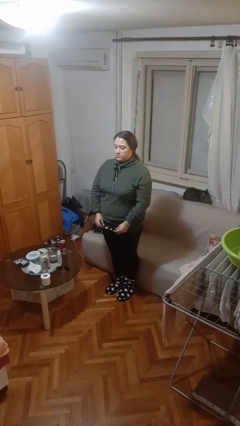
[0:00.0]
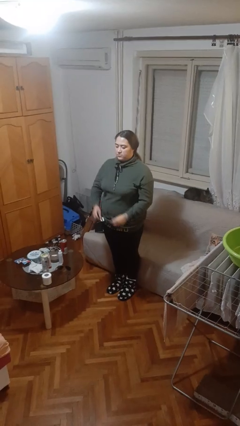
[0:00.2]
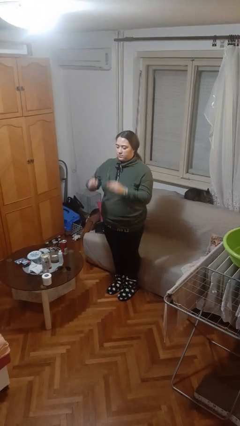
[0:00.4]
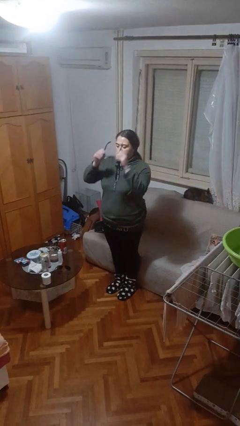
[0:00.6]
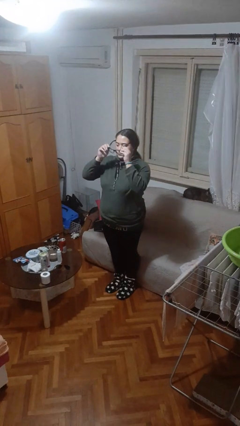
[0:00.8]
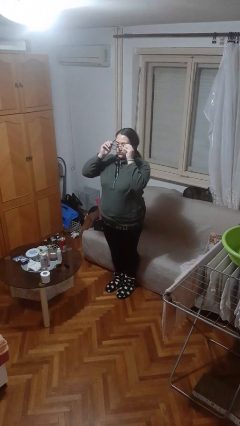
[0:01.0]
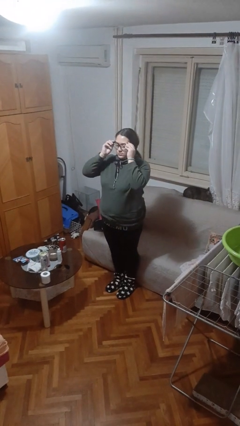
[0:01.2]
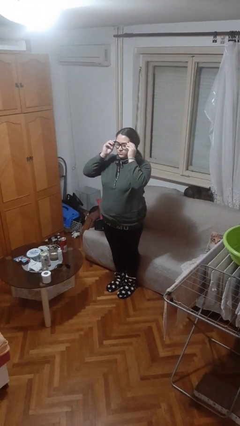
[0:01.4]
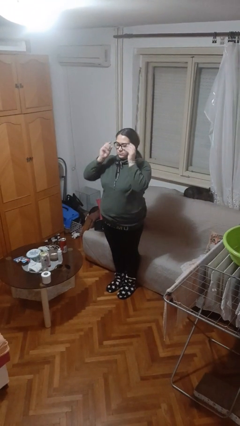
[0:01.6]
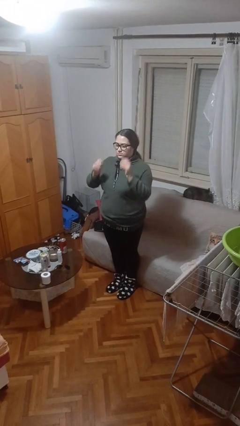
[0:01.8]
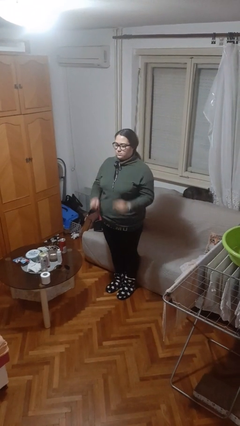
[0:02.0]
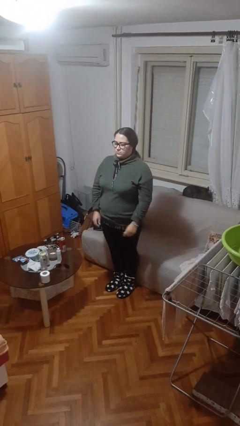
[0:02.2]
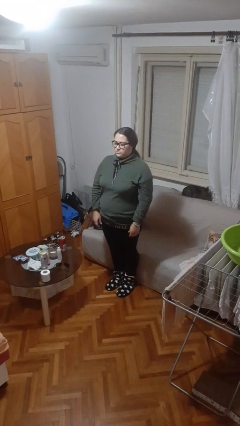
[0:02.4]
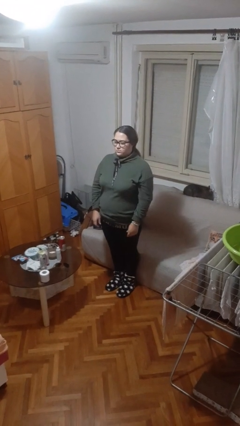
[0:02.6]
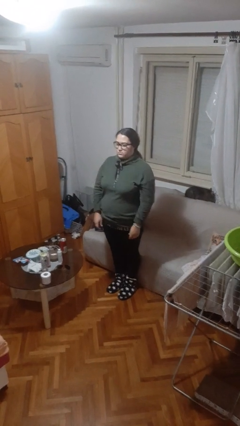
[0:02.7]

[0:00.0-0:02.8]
person puts on glasses

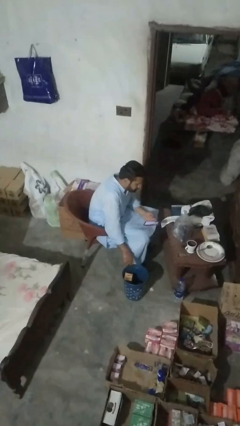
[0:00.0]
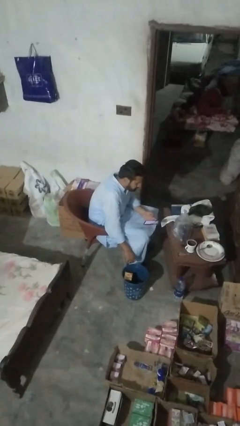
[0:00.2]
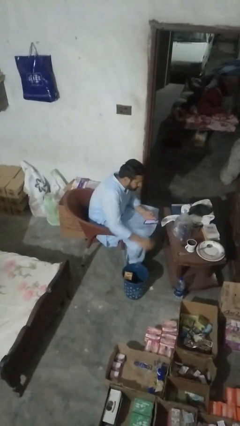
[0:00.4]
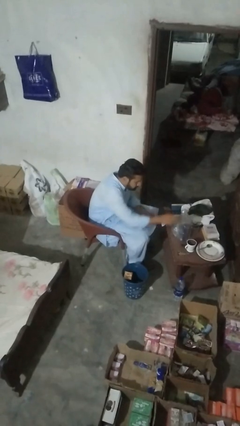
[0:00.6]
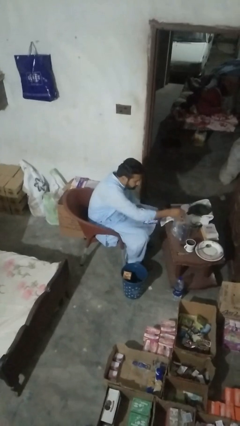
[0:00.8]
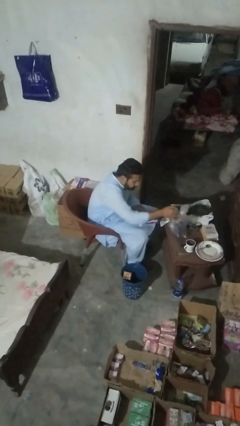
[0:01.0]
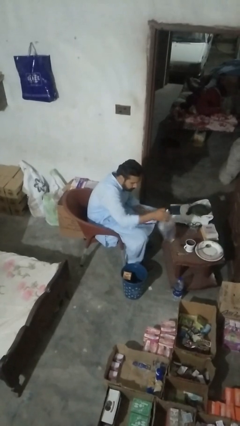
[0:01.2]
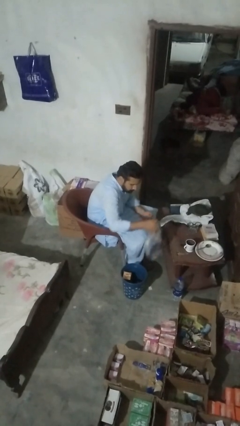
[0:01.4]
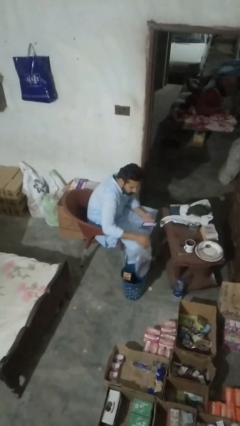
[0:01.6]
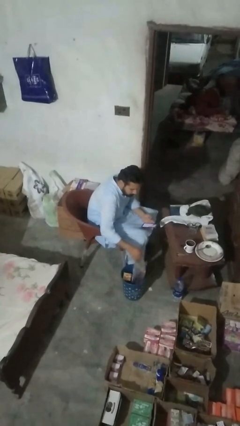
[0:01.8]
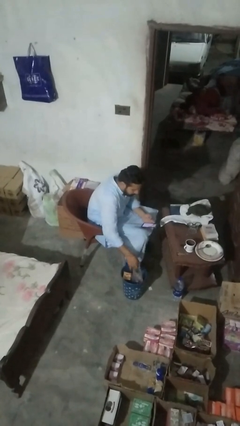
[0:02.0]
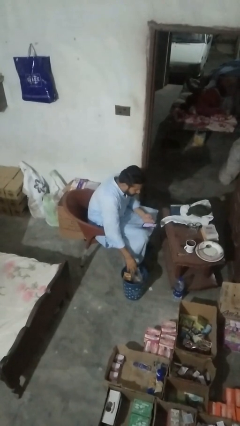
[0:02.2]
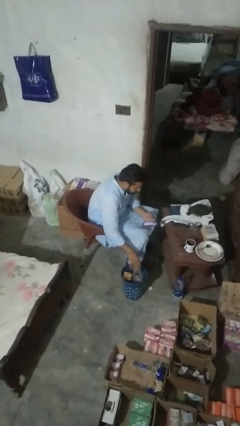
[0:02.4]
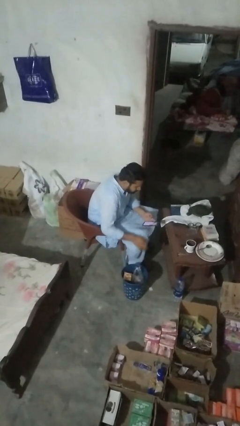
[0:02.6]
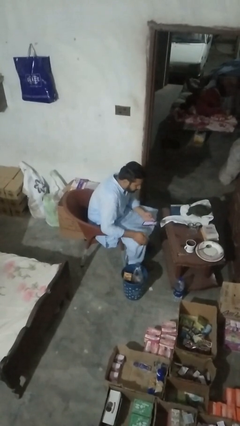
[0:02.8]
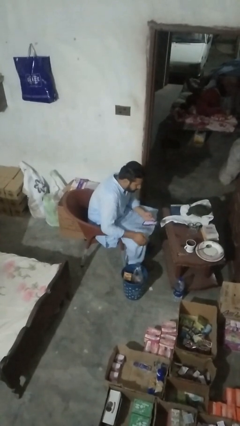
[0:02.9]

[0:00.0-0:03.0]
person removes trashbag from trashcan

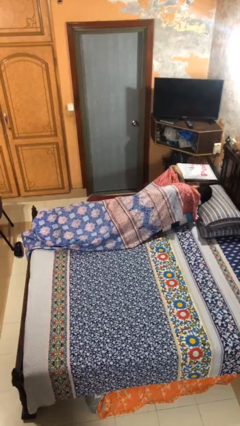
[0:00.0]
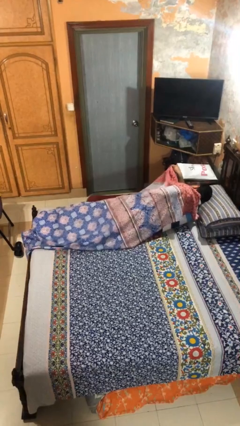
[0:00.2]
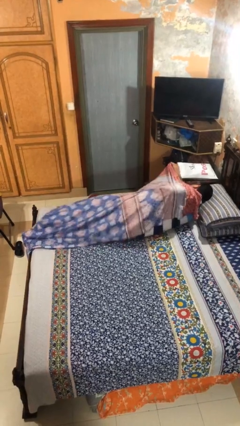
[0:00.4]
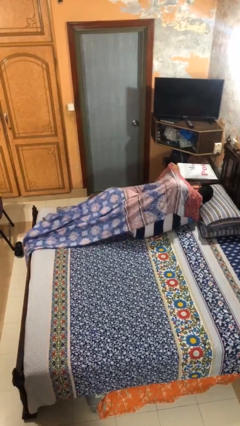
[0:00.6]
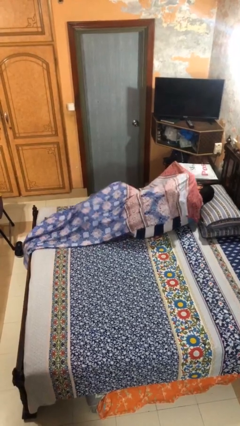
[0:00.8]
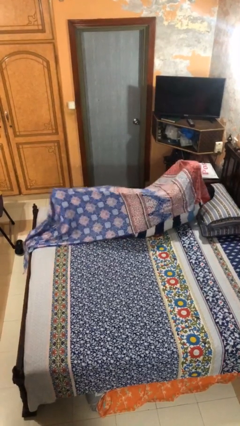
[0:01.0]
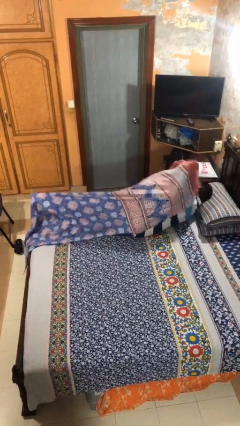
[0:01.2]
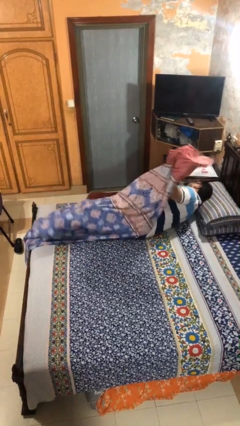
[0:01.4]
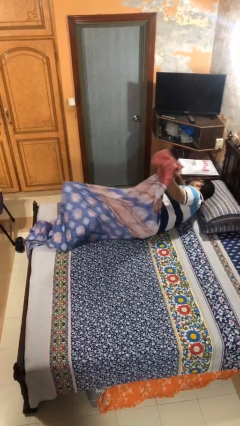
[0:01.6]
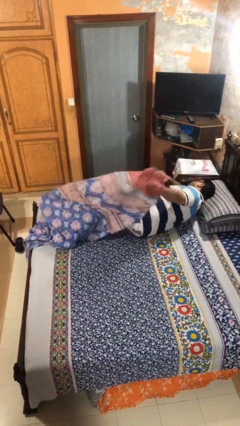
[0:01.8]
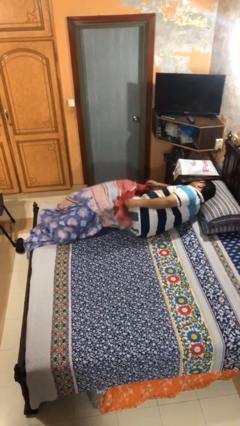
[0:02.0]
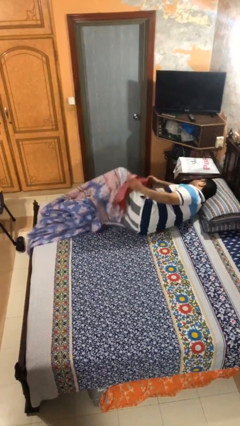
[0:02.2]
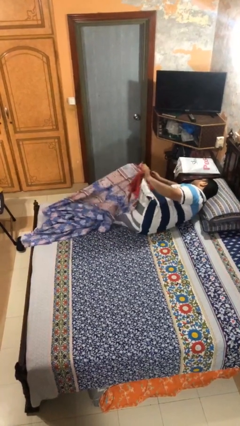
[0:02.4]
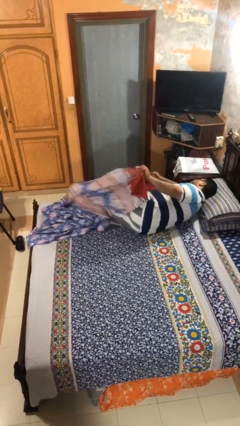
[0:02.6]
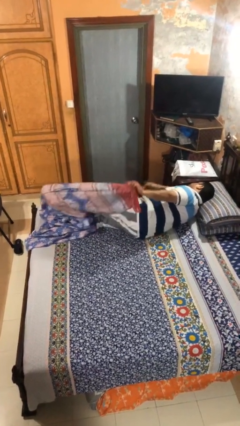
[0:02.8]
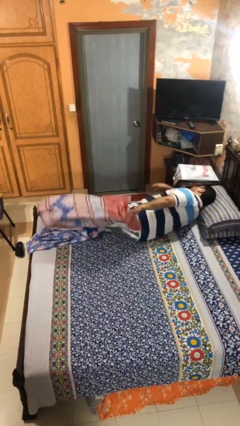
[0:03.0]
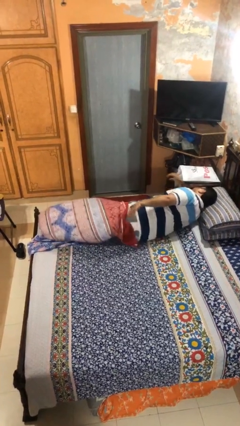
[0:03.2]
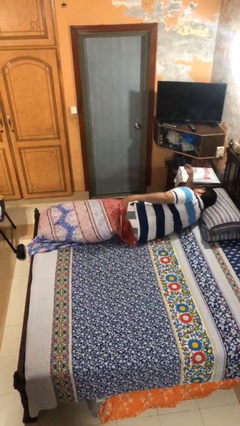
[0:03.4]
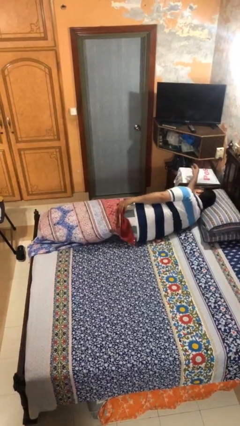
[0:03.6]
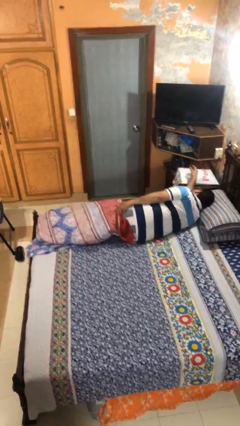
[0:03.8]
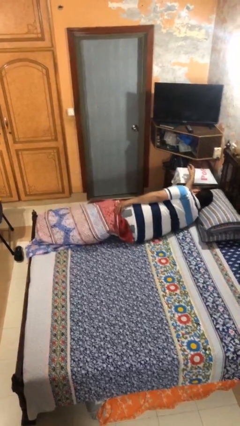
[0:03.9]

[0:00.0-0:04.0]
person uncovers with bedsheets

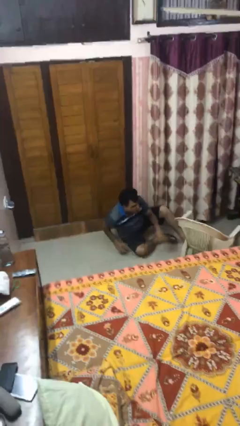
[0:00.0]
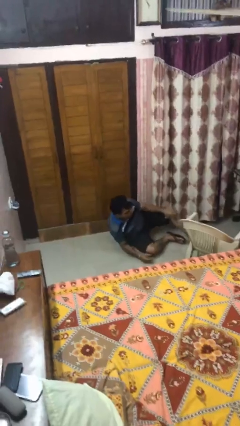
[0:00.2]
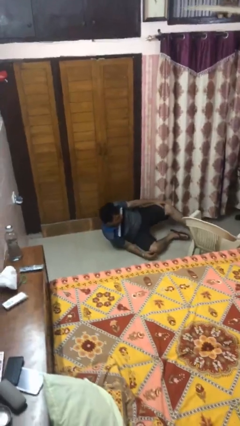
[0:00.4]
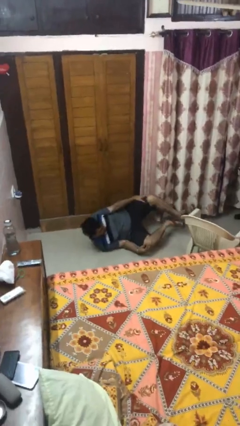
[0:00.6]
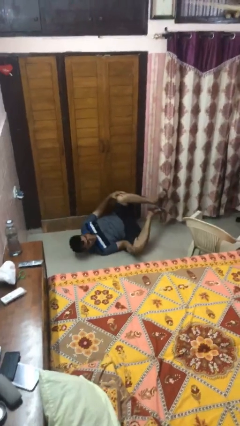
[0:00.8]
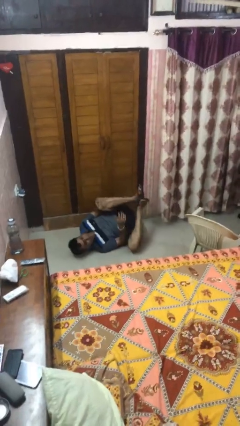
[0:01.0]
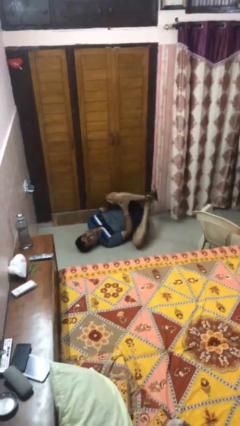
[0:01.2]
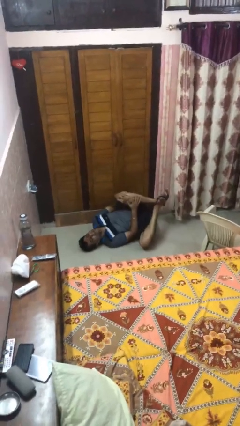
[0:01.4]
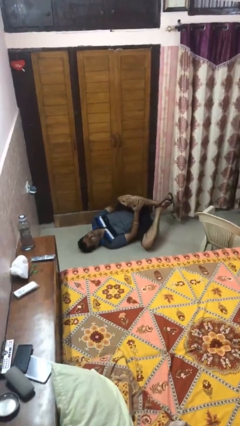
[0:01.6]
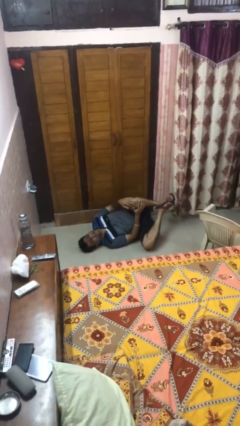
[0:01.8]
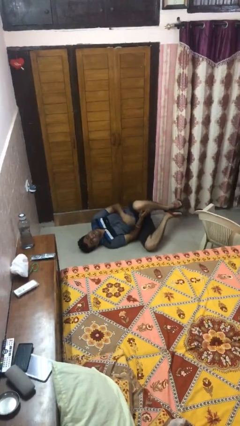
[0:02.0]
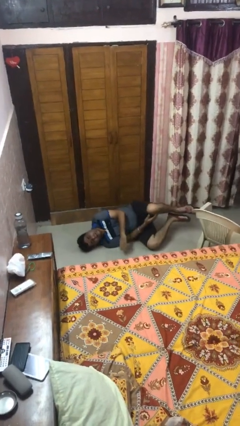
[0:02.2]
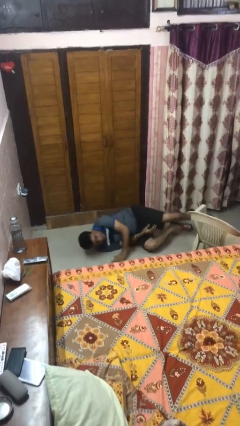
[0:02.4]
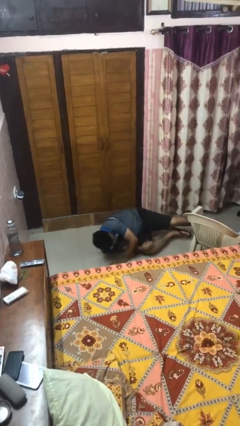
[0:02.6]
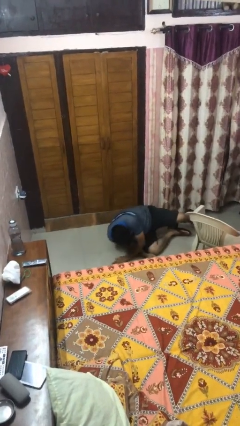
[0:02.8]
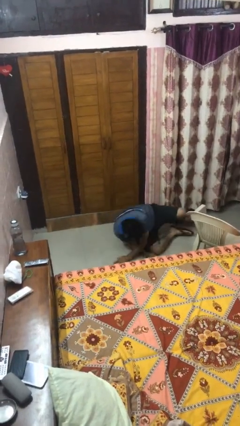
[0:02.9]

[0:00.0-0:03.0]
person lies down on floor

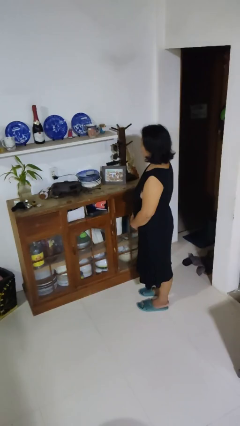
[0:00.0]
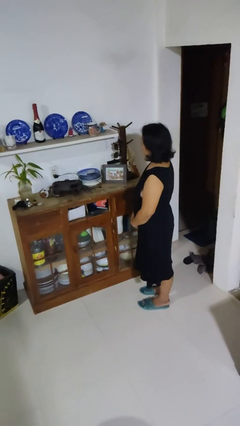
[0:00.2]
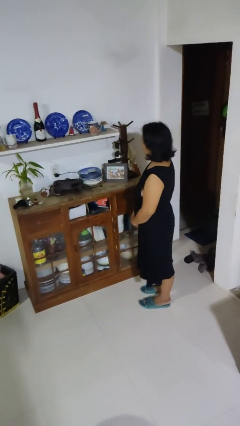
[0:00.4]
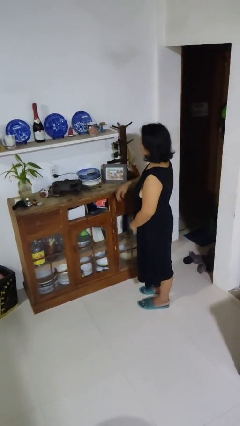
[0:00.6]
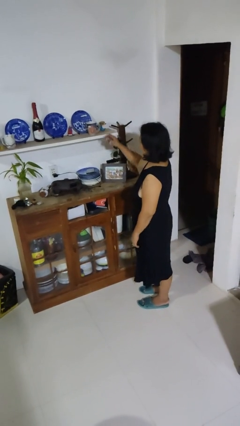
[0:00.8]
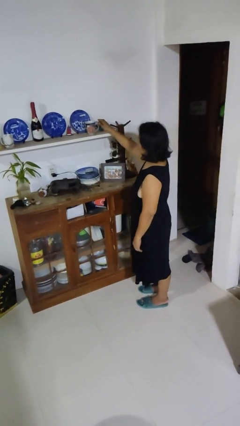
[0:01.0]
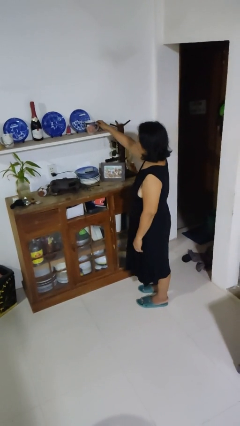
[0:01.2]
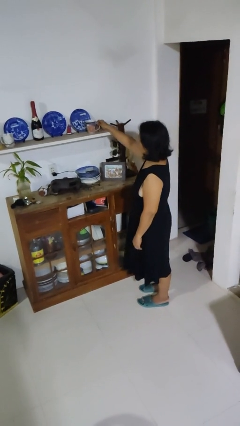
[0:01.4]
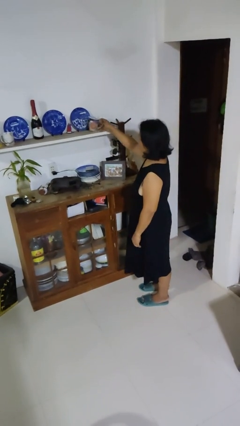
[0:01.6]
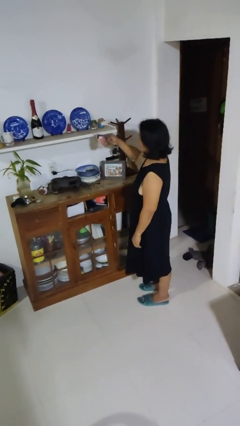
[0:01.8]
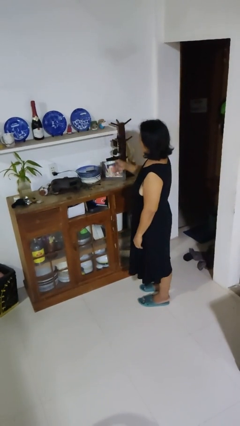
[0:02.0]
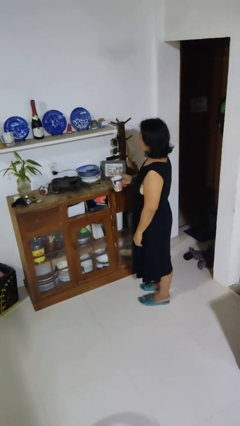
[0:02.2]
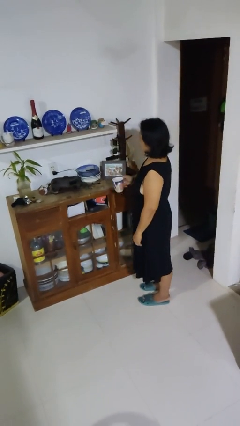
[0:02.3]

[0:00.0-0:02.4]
person picks up object from shelf

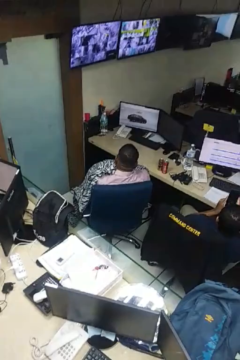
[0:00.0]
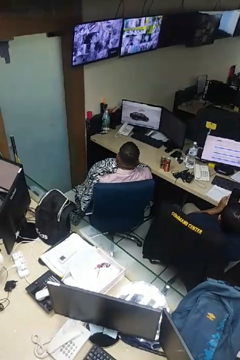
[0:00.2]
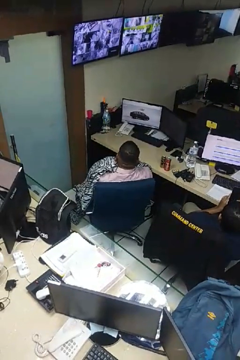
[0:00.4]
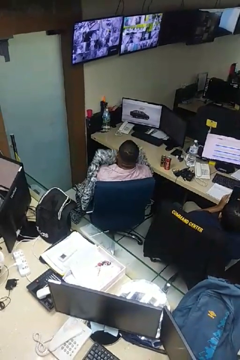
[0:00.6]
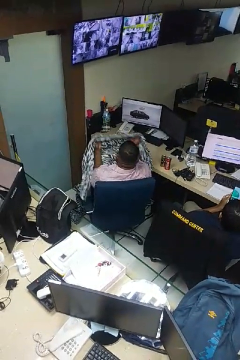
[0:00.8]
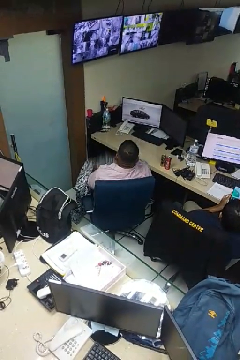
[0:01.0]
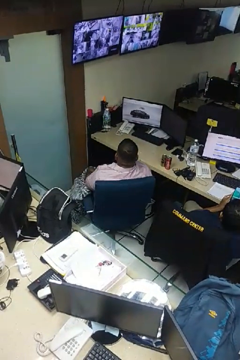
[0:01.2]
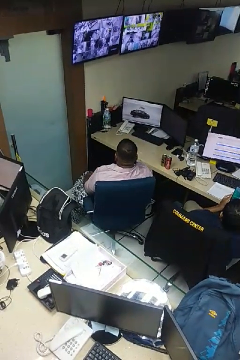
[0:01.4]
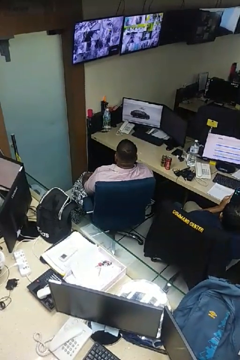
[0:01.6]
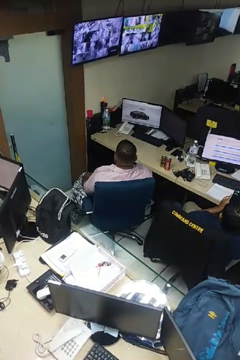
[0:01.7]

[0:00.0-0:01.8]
person uncovers with blanket

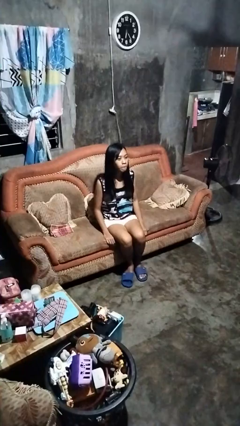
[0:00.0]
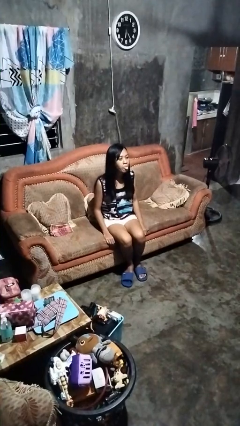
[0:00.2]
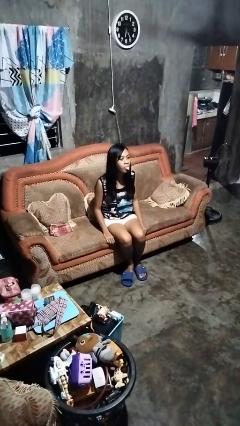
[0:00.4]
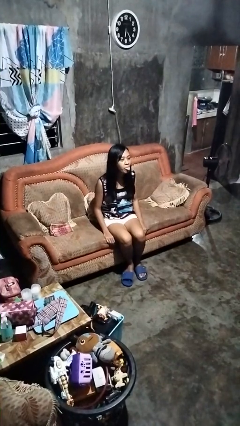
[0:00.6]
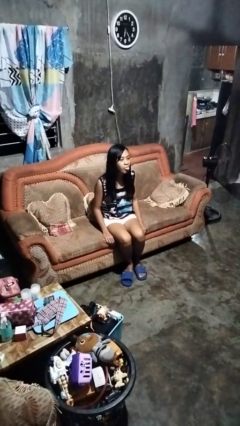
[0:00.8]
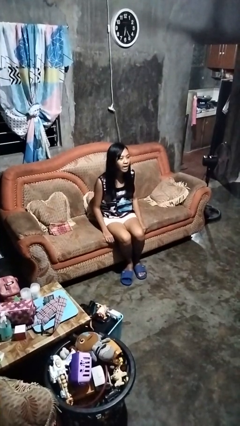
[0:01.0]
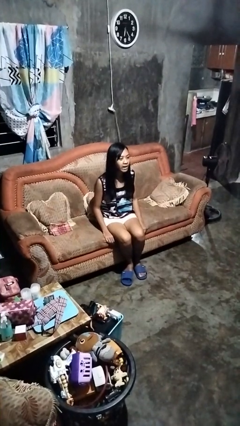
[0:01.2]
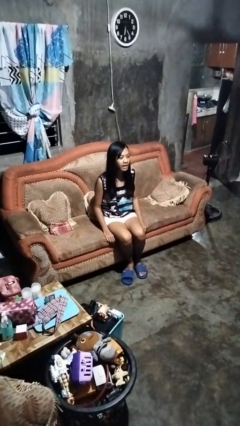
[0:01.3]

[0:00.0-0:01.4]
person sticks out tongue
